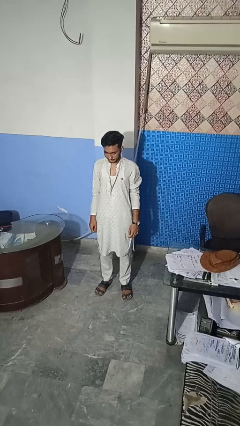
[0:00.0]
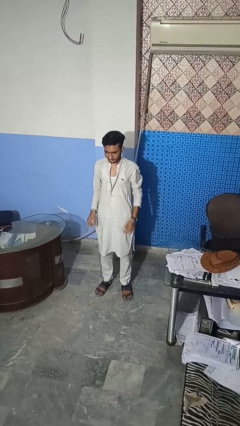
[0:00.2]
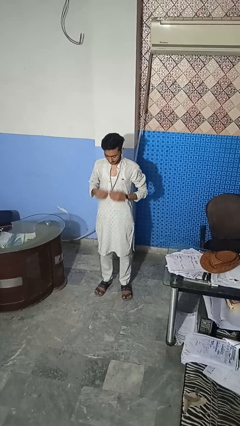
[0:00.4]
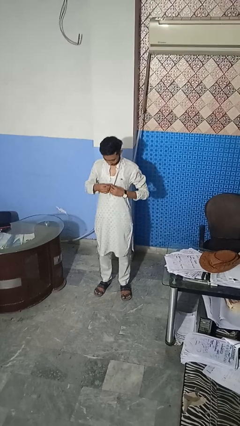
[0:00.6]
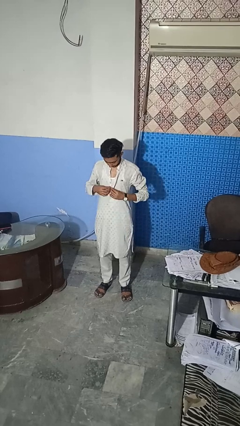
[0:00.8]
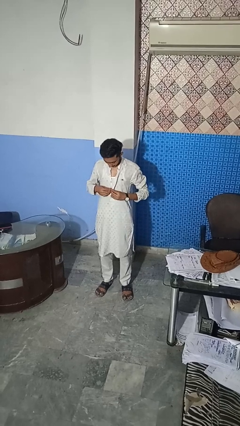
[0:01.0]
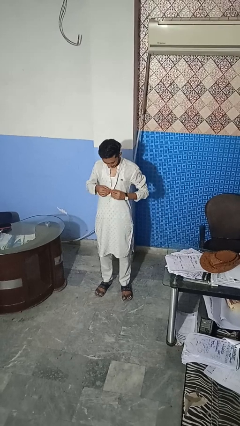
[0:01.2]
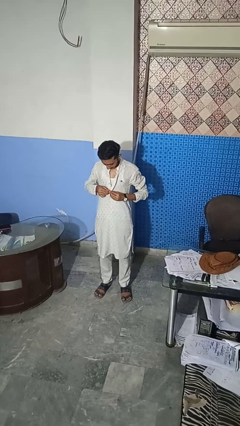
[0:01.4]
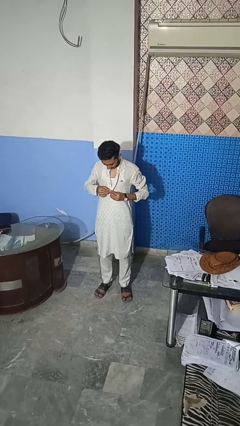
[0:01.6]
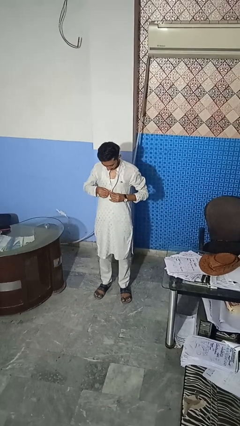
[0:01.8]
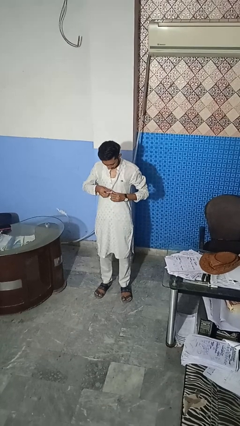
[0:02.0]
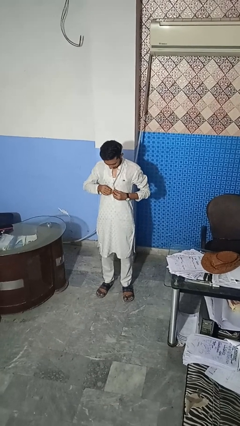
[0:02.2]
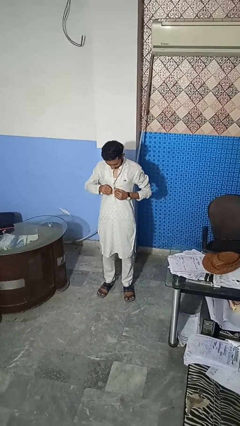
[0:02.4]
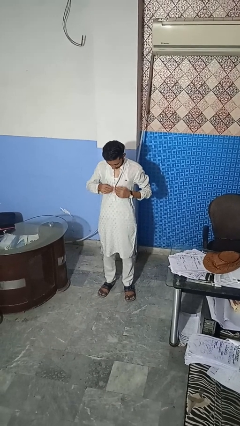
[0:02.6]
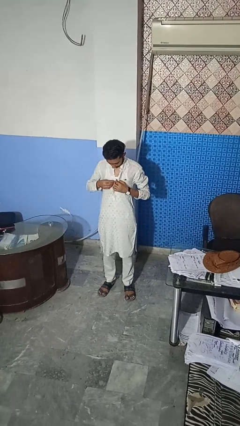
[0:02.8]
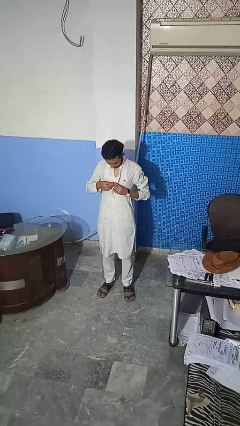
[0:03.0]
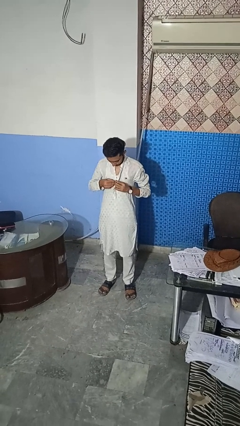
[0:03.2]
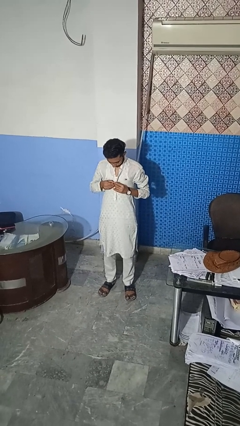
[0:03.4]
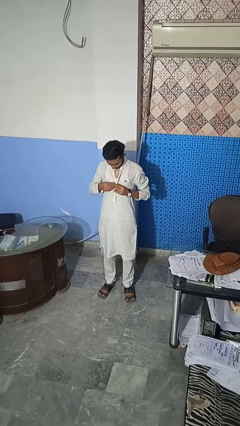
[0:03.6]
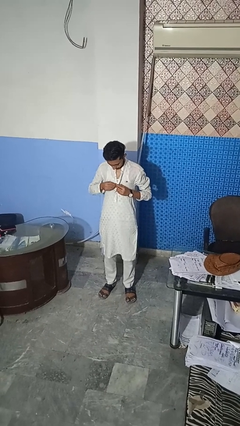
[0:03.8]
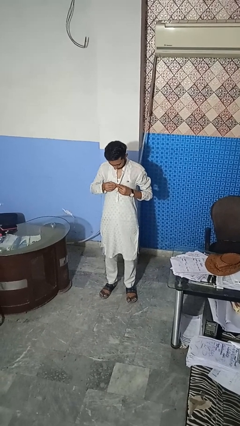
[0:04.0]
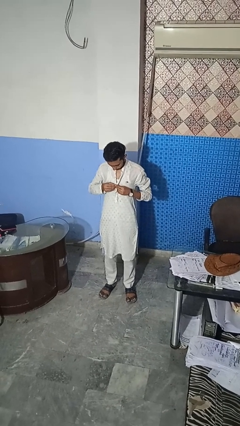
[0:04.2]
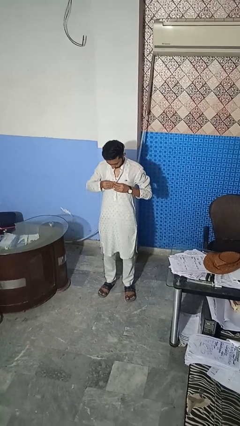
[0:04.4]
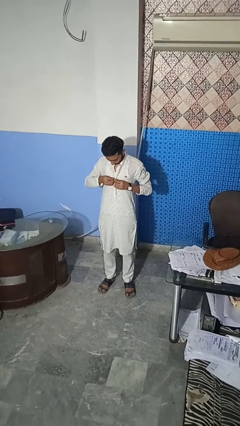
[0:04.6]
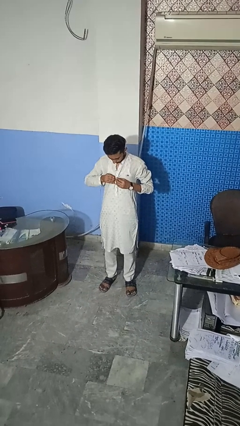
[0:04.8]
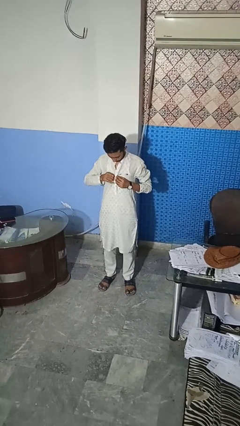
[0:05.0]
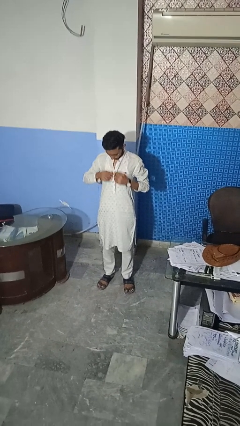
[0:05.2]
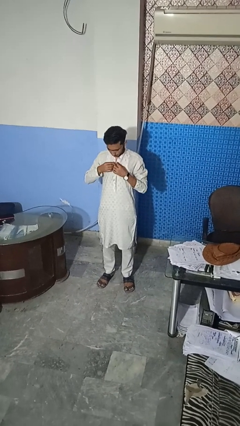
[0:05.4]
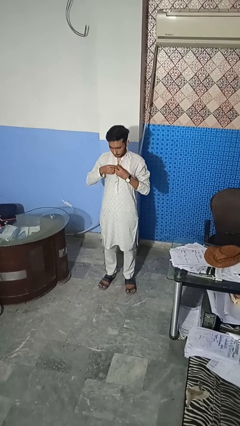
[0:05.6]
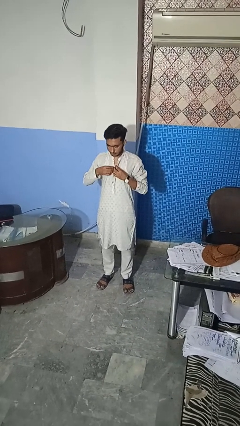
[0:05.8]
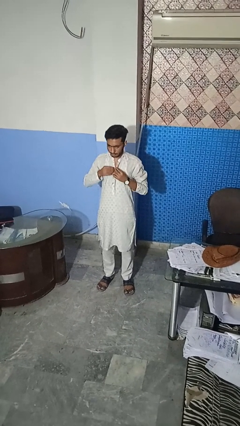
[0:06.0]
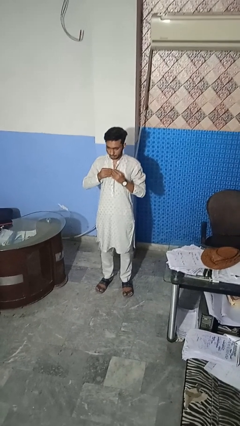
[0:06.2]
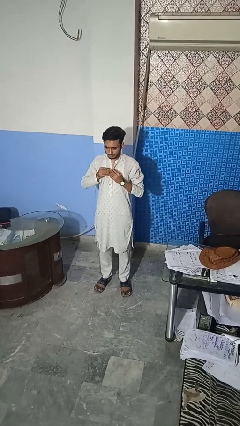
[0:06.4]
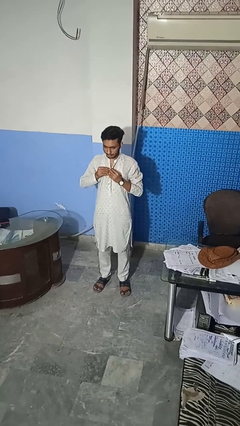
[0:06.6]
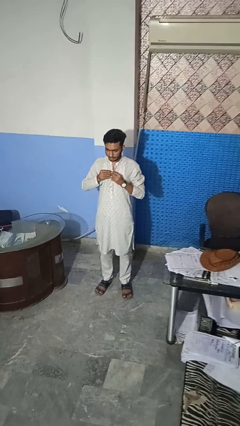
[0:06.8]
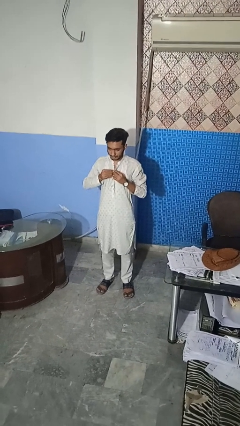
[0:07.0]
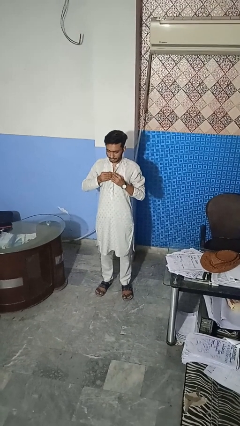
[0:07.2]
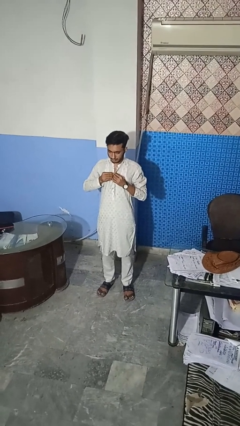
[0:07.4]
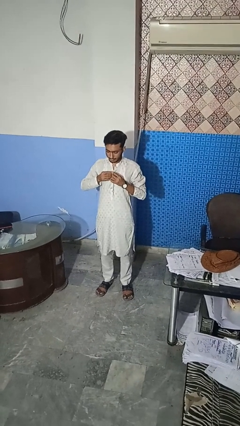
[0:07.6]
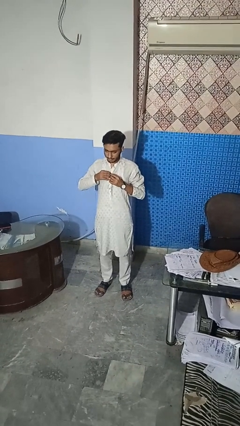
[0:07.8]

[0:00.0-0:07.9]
person buttons shirt

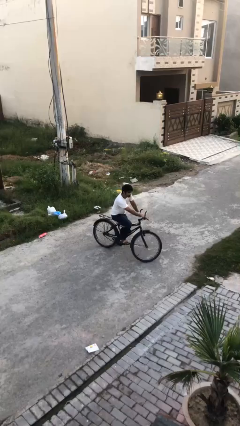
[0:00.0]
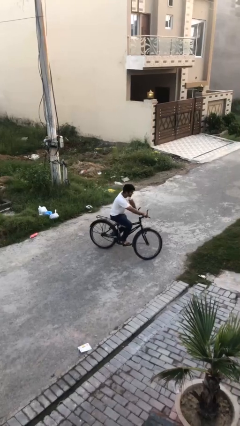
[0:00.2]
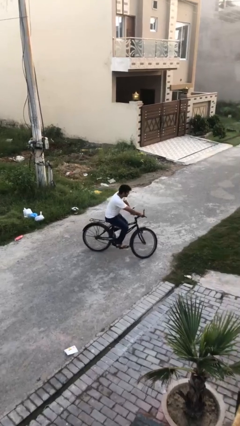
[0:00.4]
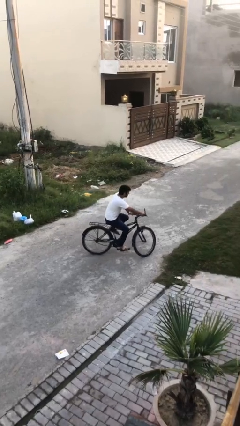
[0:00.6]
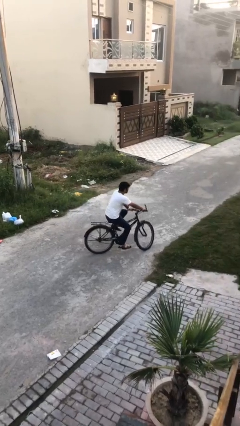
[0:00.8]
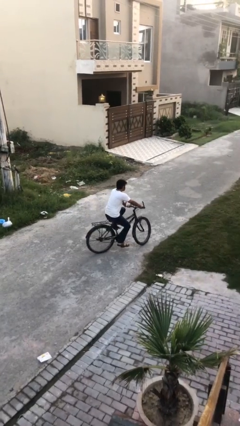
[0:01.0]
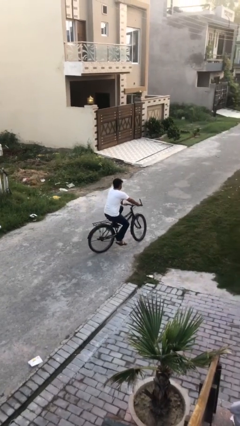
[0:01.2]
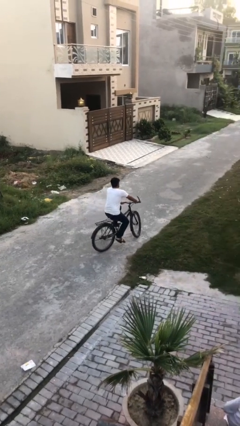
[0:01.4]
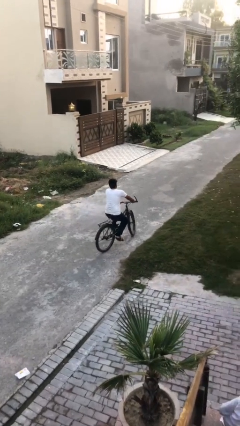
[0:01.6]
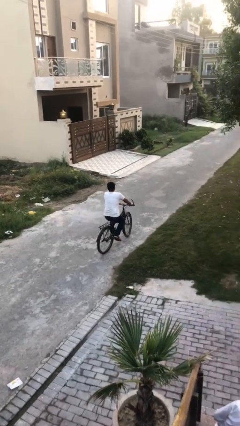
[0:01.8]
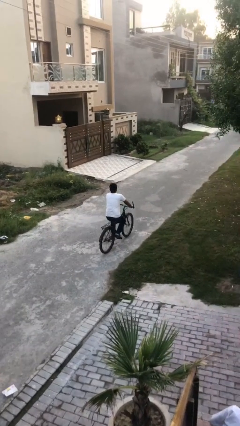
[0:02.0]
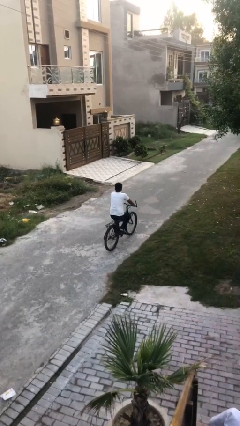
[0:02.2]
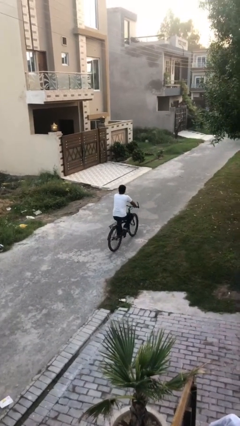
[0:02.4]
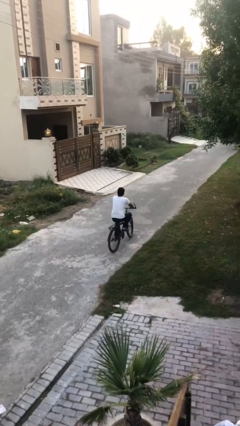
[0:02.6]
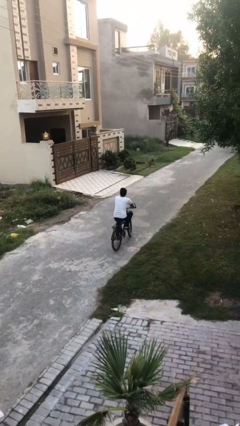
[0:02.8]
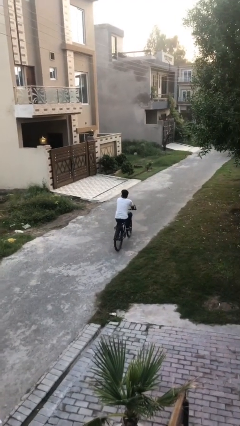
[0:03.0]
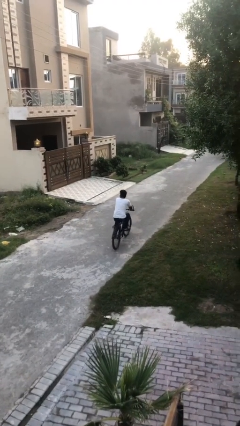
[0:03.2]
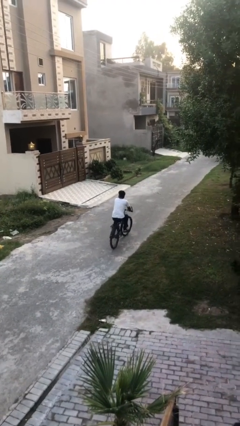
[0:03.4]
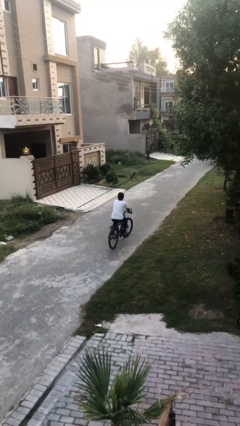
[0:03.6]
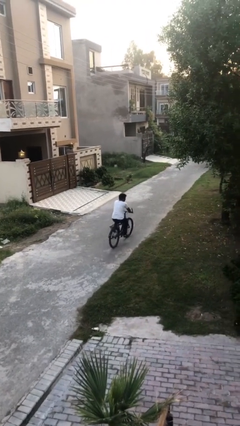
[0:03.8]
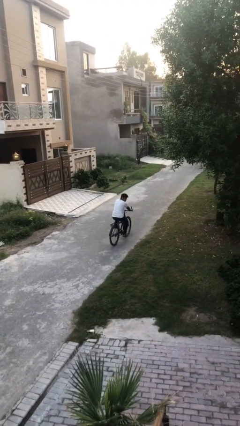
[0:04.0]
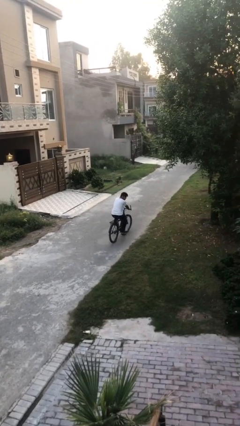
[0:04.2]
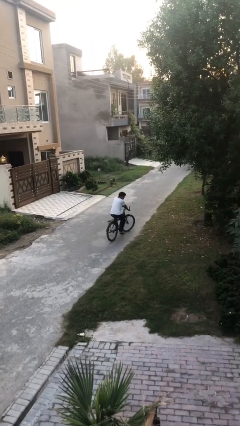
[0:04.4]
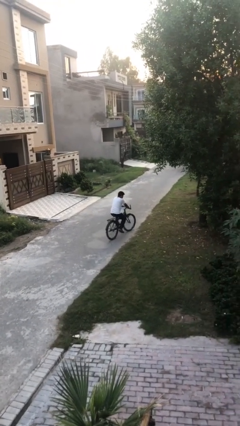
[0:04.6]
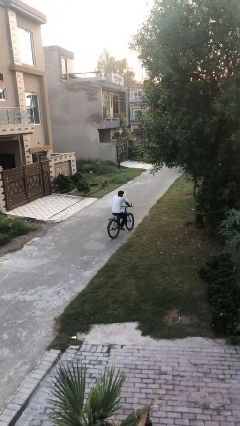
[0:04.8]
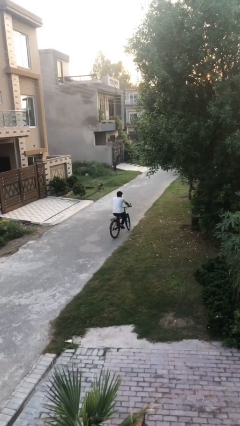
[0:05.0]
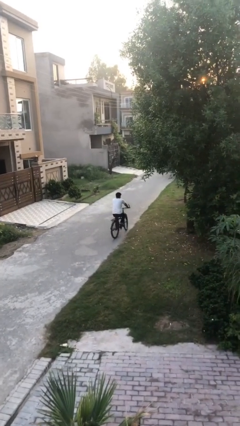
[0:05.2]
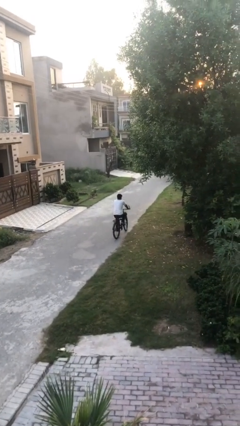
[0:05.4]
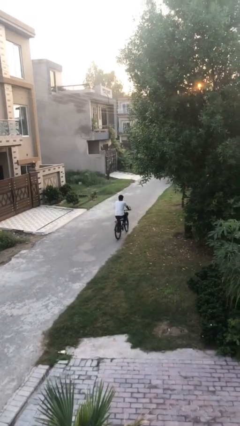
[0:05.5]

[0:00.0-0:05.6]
person rides bicycle

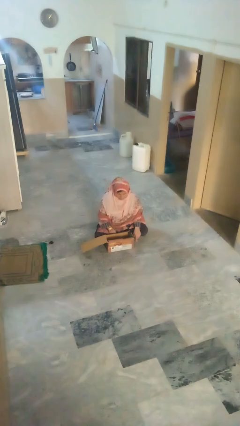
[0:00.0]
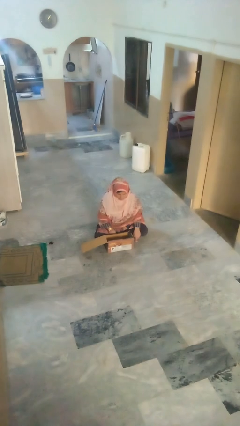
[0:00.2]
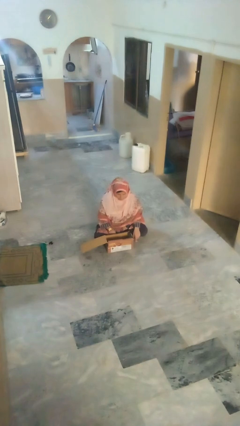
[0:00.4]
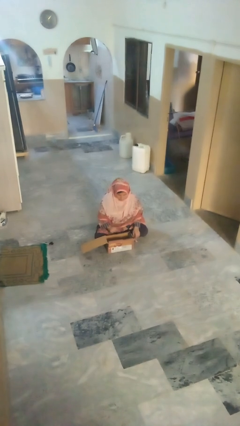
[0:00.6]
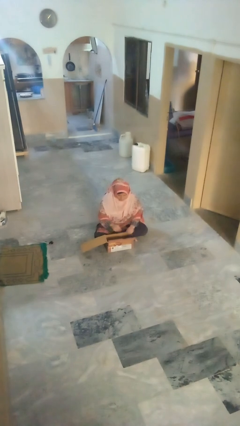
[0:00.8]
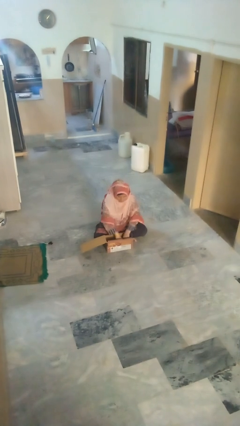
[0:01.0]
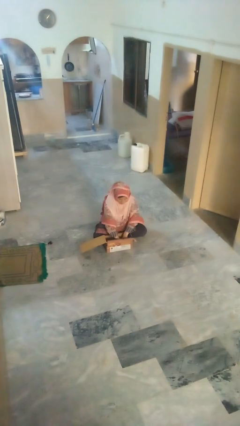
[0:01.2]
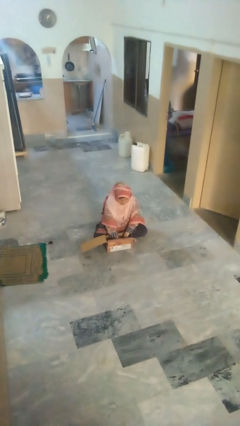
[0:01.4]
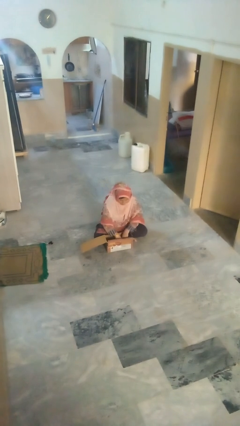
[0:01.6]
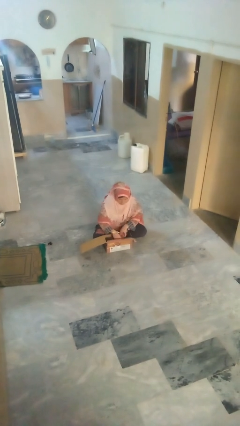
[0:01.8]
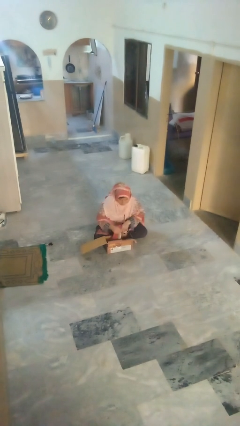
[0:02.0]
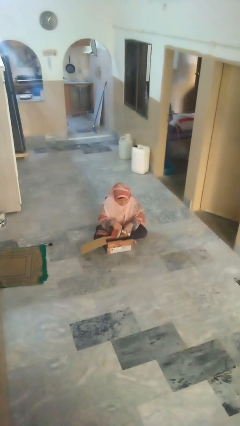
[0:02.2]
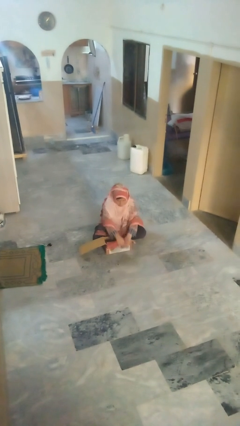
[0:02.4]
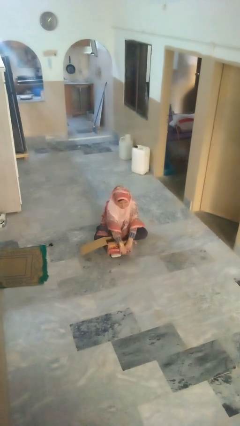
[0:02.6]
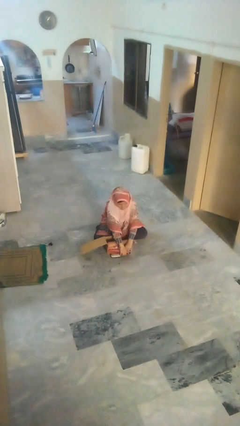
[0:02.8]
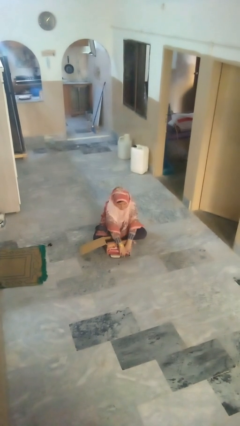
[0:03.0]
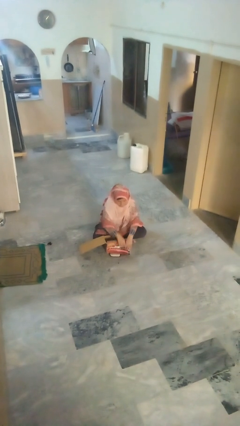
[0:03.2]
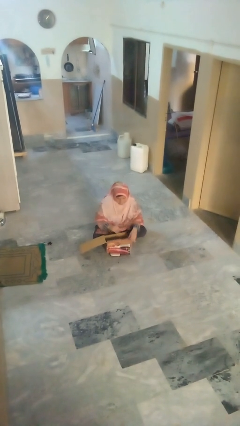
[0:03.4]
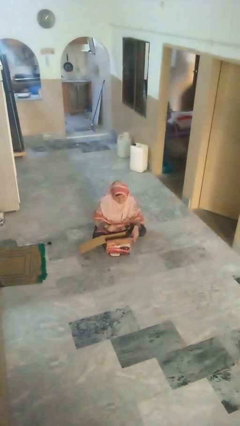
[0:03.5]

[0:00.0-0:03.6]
person takes object from box

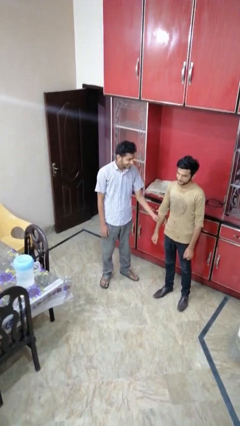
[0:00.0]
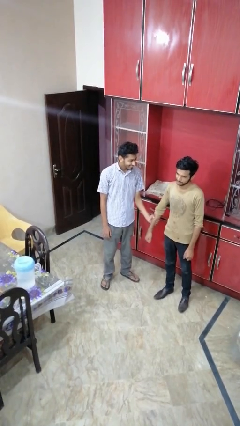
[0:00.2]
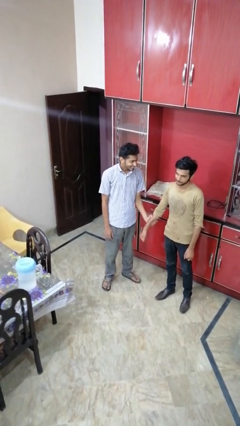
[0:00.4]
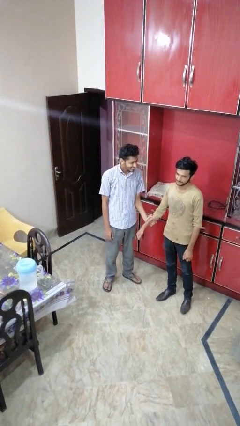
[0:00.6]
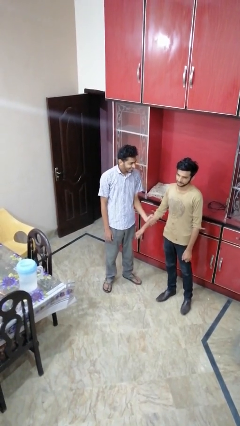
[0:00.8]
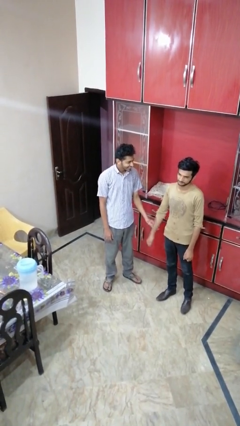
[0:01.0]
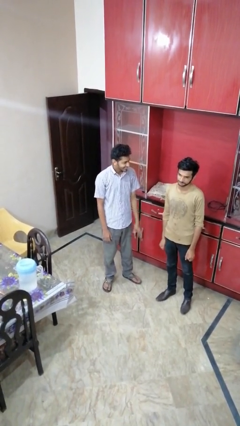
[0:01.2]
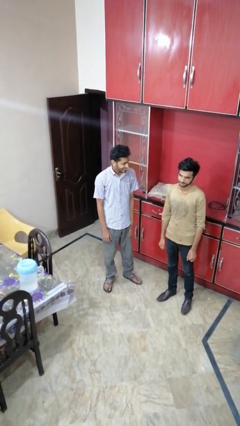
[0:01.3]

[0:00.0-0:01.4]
person grabs person by forearm
